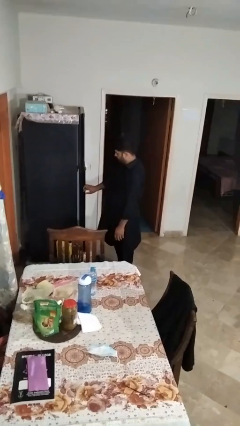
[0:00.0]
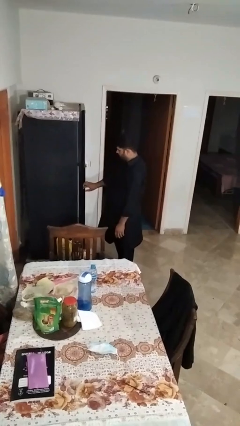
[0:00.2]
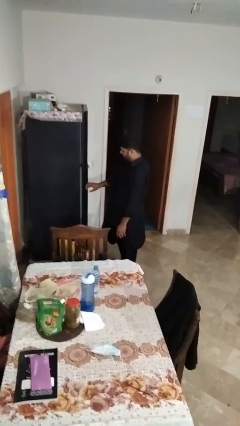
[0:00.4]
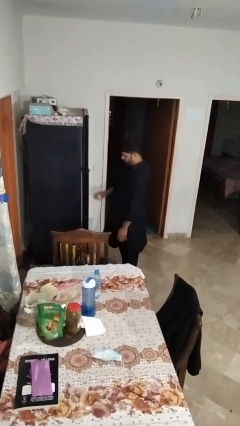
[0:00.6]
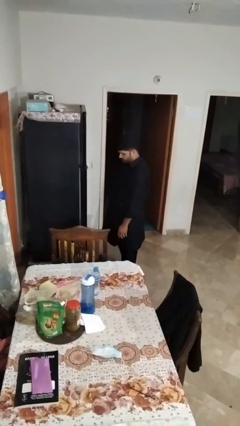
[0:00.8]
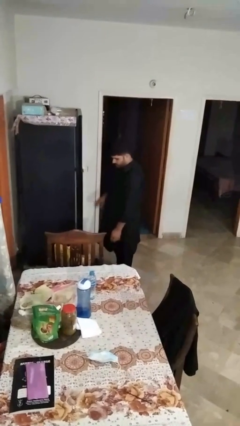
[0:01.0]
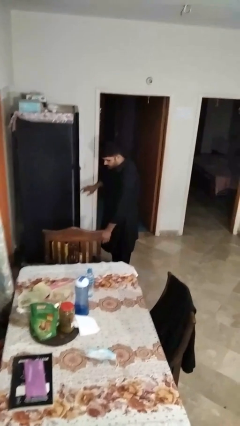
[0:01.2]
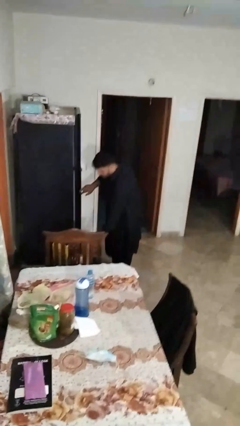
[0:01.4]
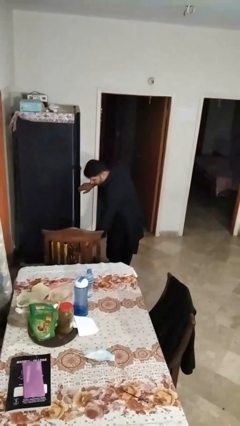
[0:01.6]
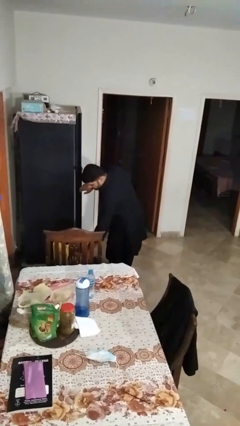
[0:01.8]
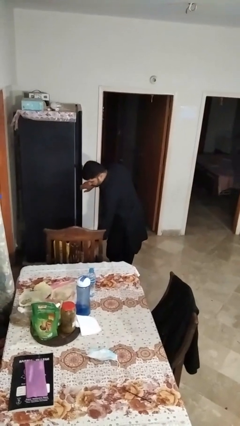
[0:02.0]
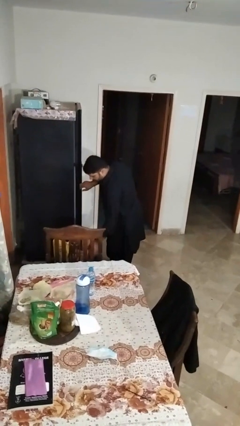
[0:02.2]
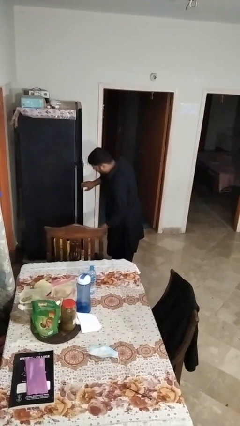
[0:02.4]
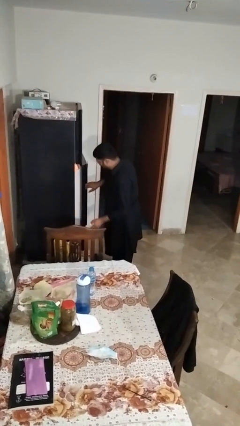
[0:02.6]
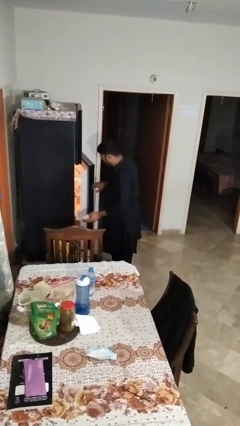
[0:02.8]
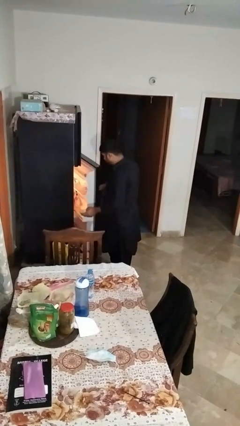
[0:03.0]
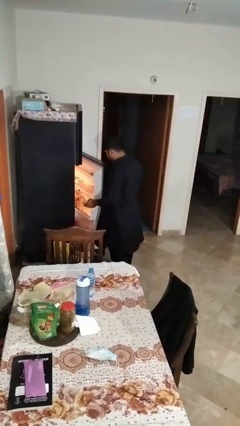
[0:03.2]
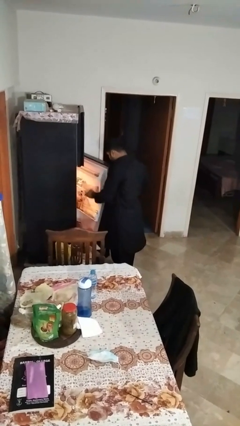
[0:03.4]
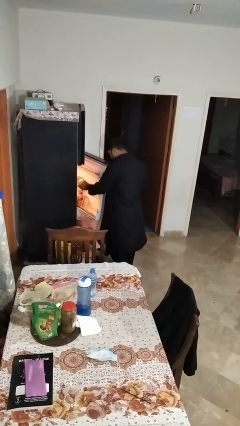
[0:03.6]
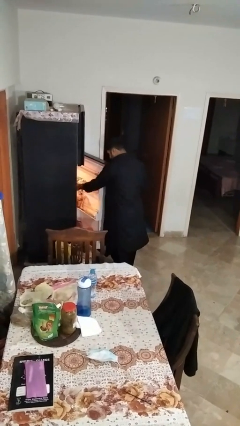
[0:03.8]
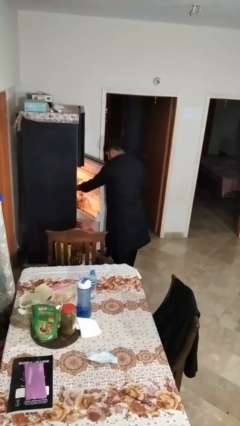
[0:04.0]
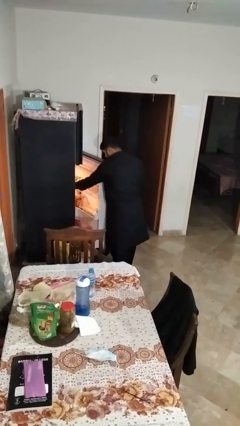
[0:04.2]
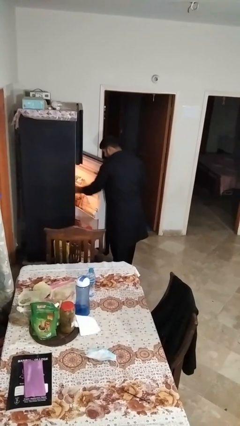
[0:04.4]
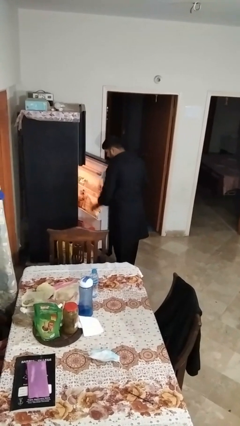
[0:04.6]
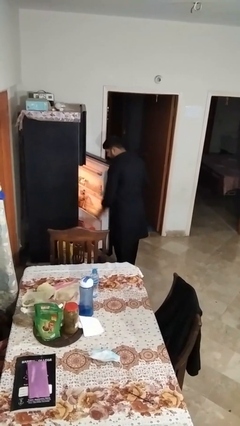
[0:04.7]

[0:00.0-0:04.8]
person loads groceries into refrigerator

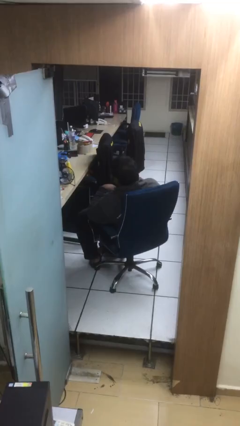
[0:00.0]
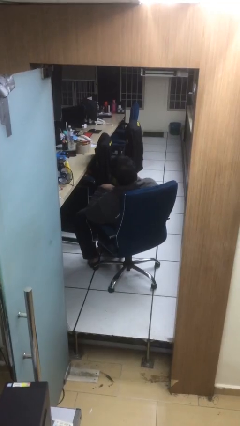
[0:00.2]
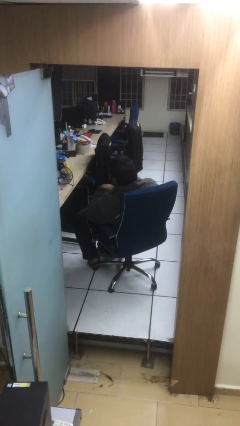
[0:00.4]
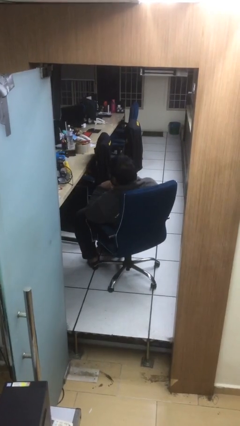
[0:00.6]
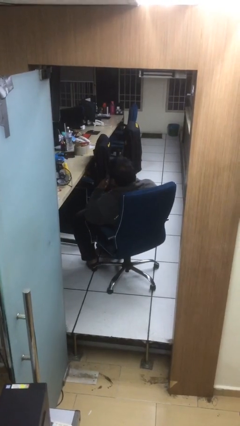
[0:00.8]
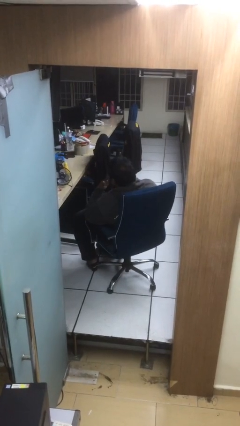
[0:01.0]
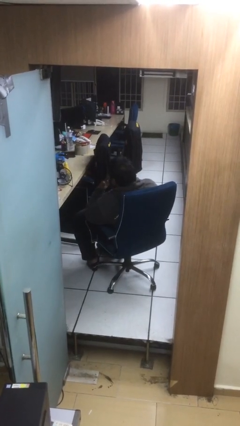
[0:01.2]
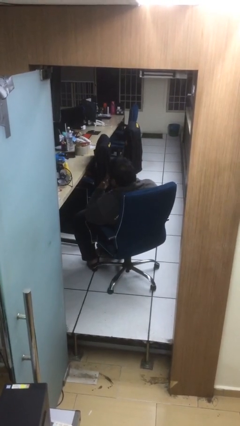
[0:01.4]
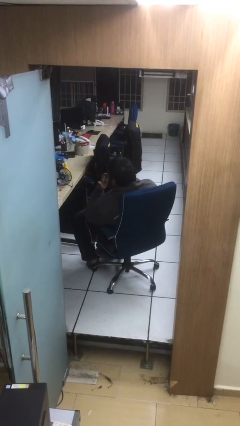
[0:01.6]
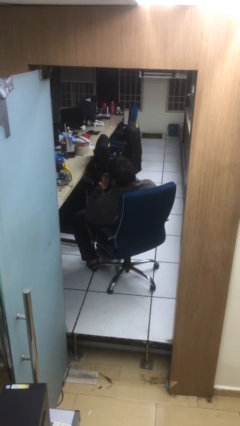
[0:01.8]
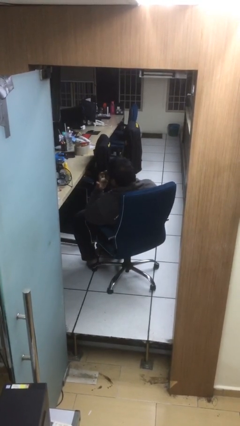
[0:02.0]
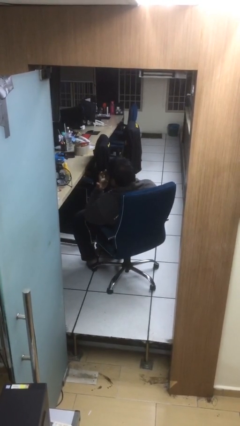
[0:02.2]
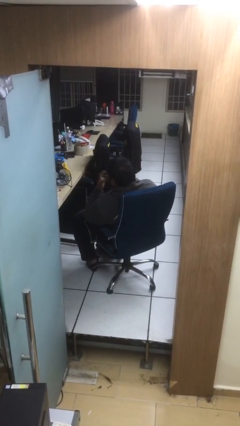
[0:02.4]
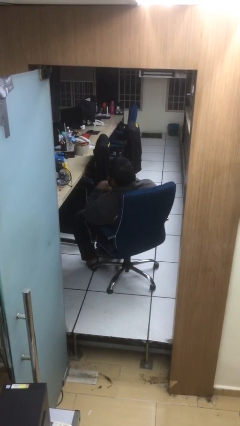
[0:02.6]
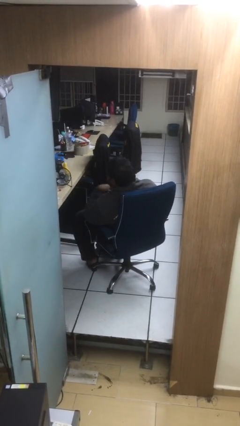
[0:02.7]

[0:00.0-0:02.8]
person licks fingers

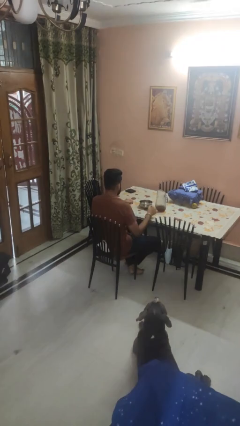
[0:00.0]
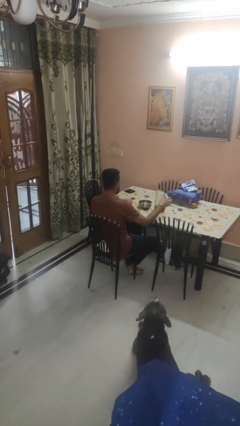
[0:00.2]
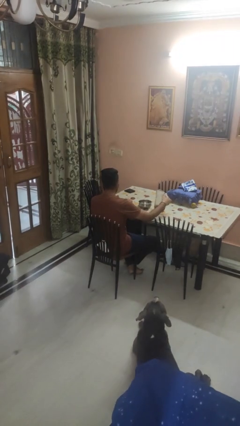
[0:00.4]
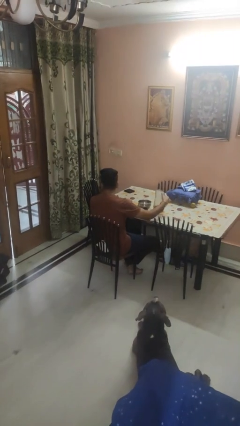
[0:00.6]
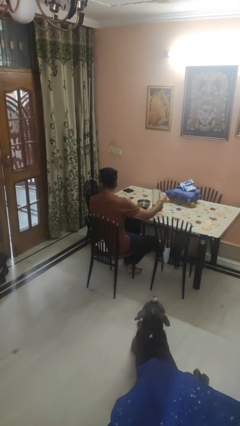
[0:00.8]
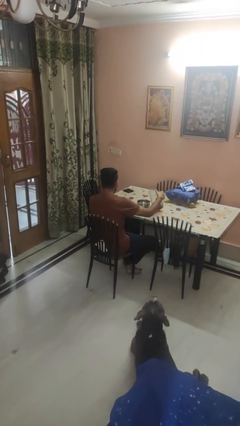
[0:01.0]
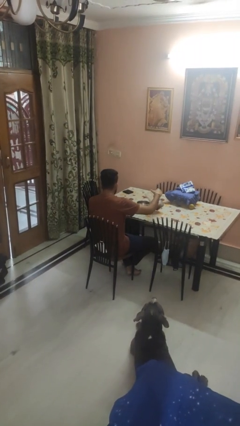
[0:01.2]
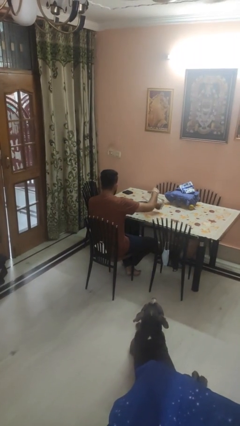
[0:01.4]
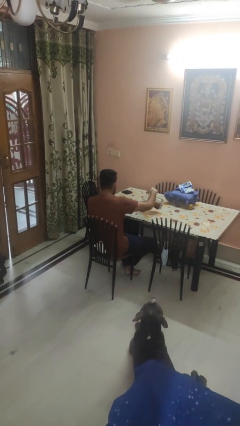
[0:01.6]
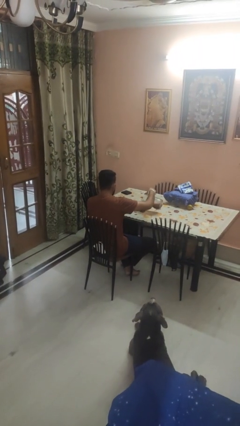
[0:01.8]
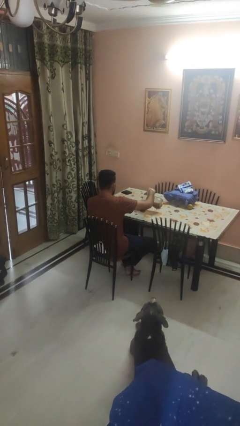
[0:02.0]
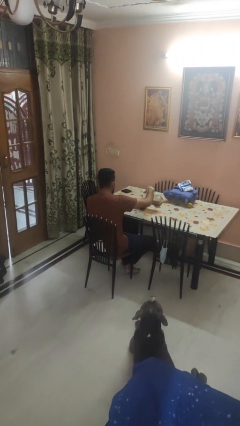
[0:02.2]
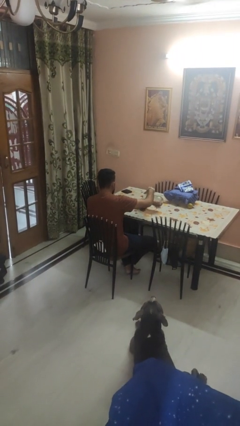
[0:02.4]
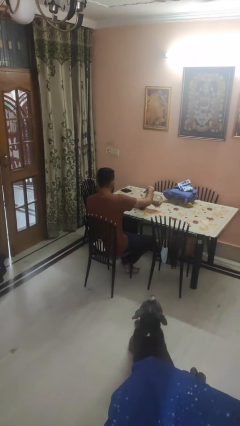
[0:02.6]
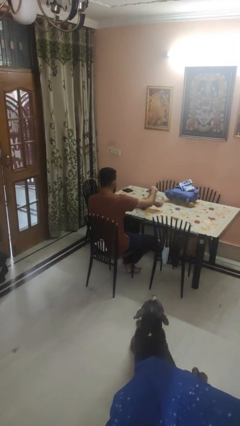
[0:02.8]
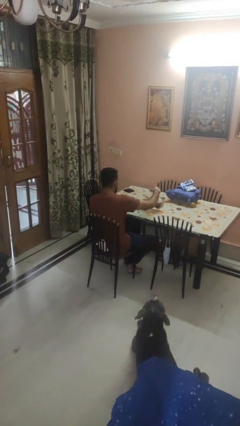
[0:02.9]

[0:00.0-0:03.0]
person pours into bowl

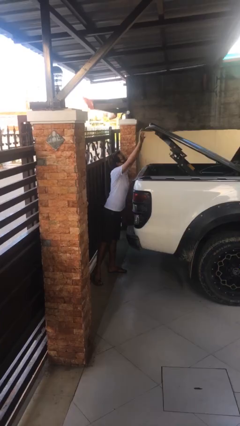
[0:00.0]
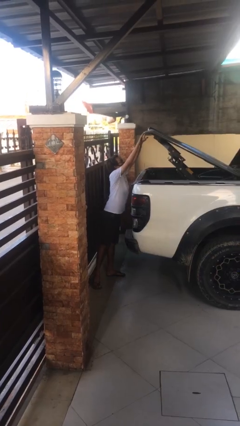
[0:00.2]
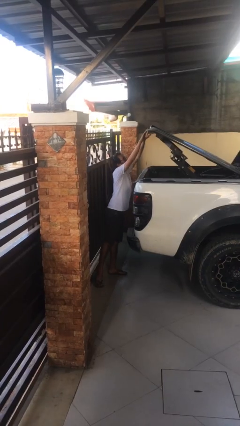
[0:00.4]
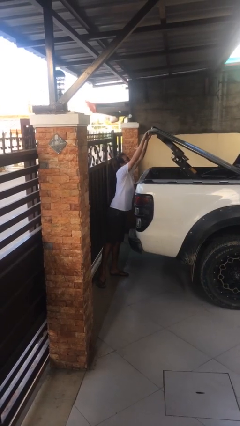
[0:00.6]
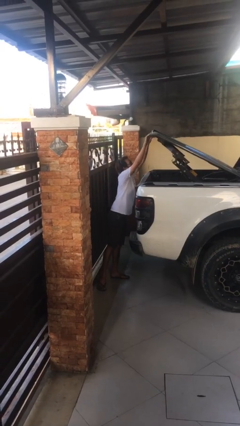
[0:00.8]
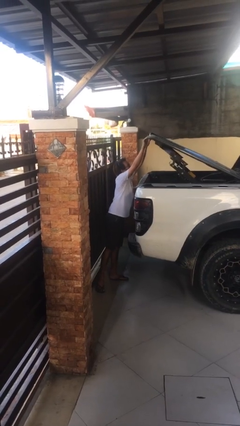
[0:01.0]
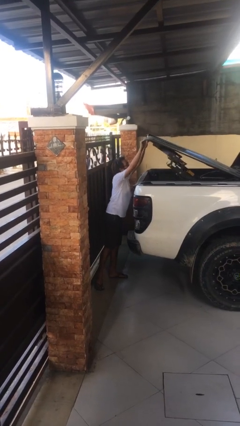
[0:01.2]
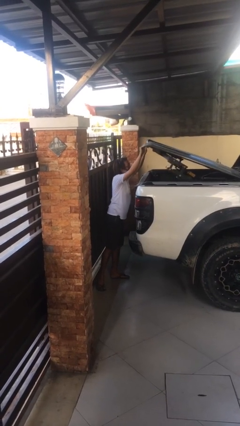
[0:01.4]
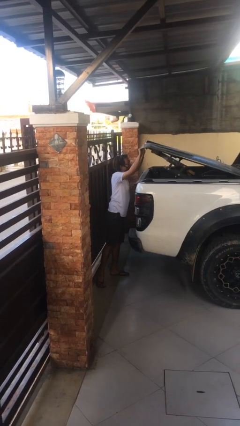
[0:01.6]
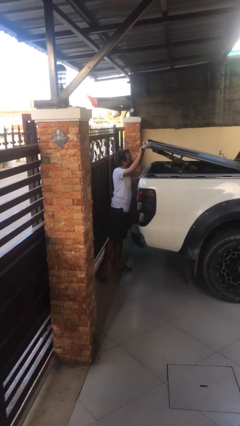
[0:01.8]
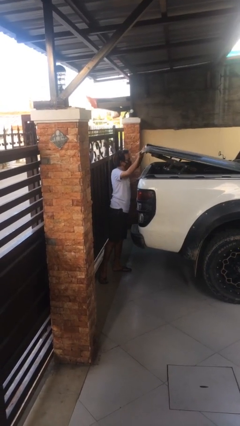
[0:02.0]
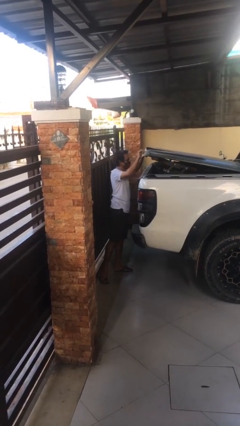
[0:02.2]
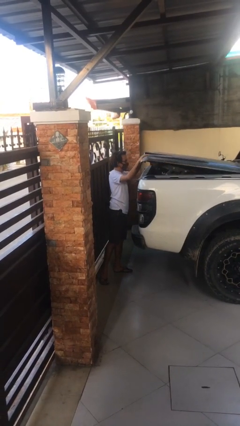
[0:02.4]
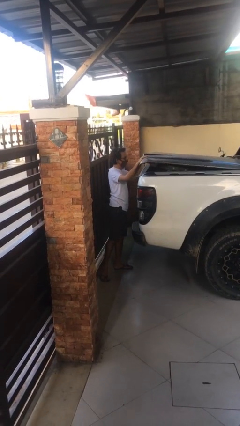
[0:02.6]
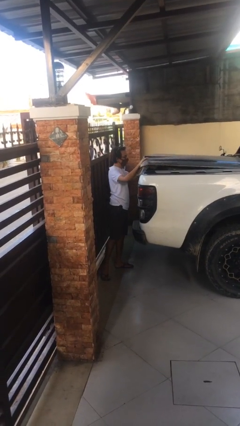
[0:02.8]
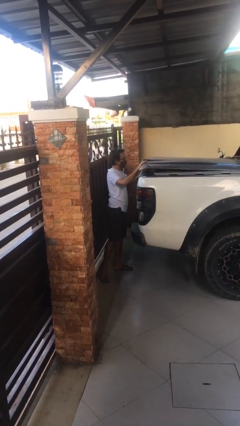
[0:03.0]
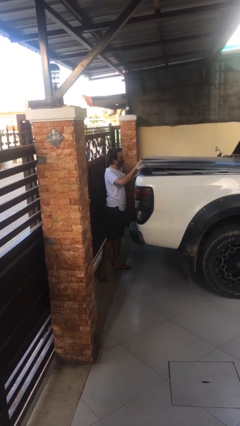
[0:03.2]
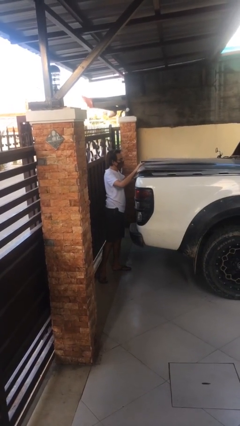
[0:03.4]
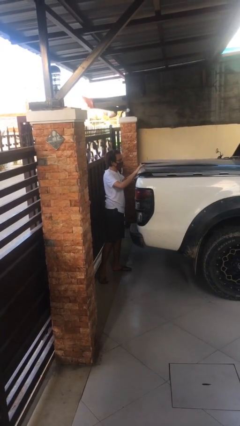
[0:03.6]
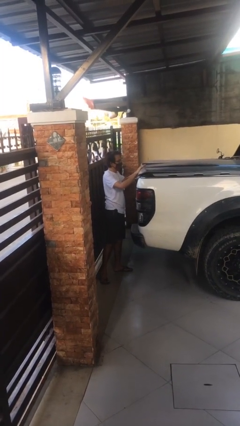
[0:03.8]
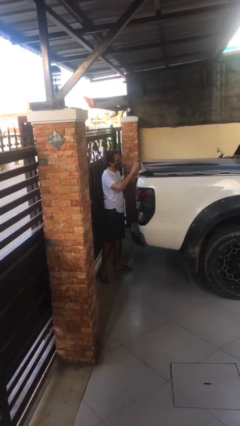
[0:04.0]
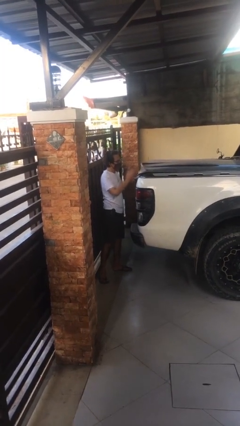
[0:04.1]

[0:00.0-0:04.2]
person closes car trunk

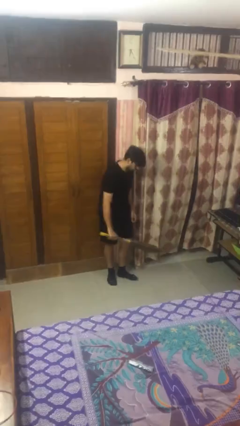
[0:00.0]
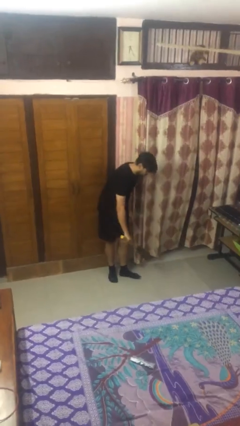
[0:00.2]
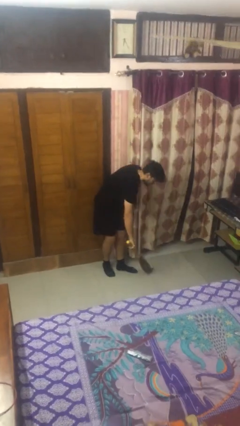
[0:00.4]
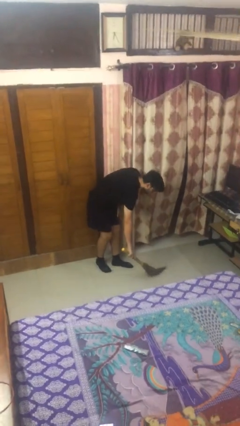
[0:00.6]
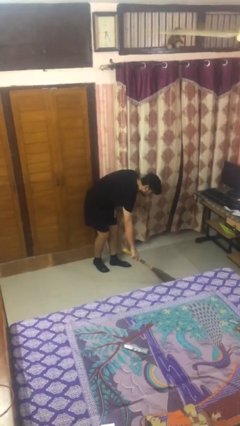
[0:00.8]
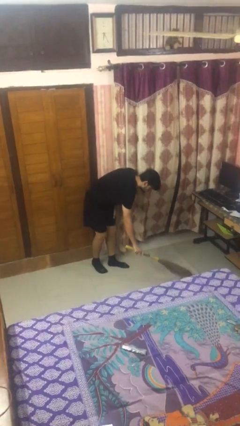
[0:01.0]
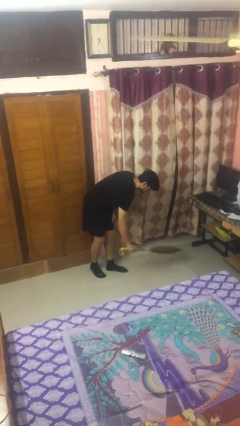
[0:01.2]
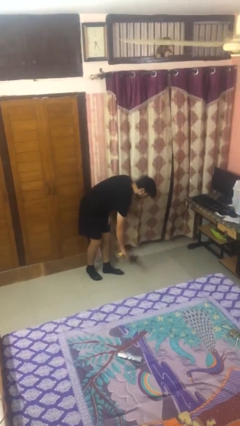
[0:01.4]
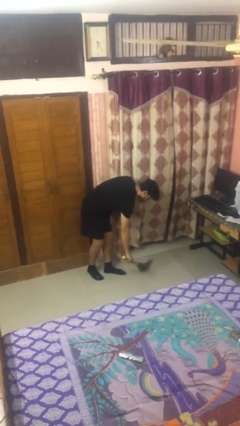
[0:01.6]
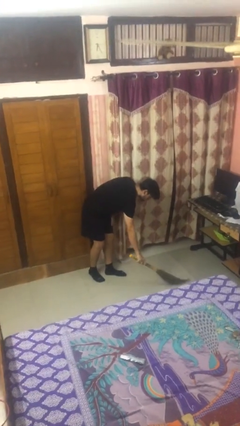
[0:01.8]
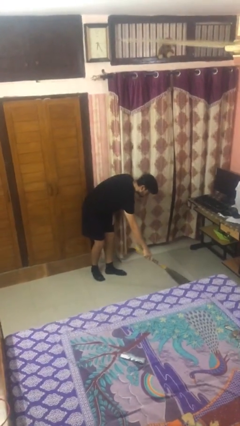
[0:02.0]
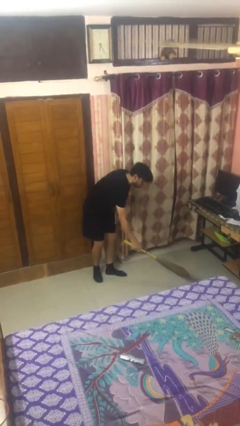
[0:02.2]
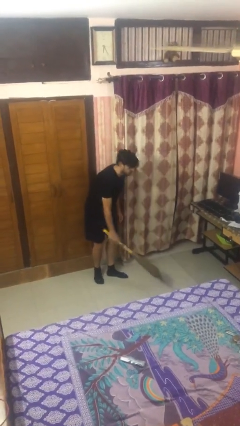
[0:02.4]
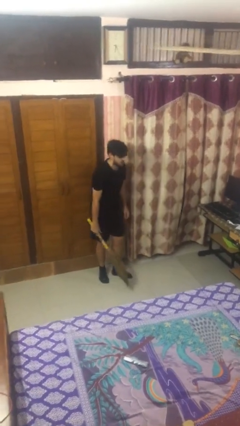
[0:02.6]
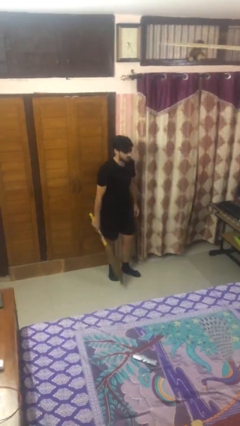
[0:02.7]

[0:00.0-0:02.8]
person sweeps floor
